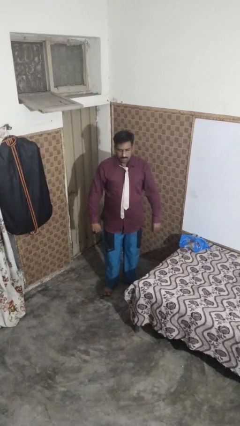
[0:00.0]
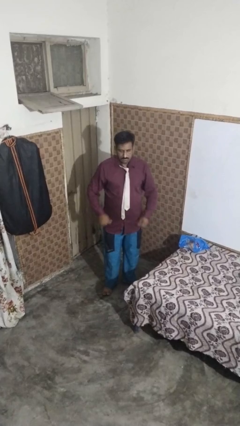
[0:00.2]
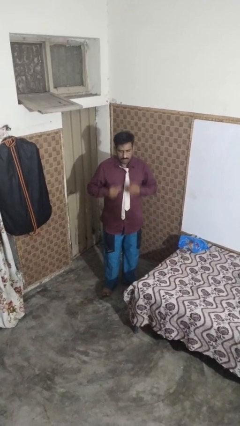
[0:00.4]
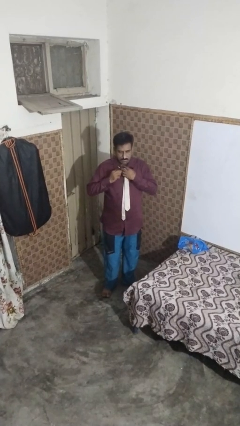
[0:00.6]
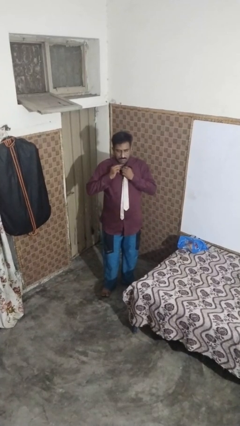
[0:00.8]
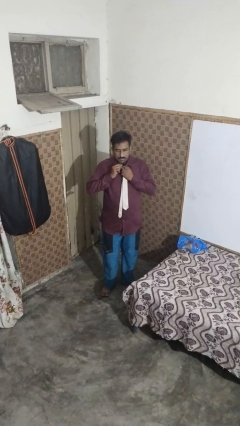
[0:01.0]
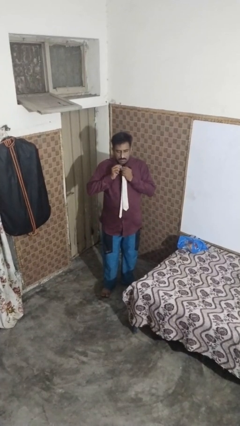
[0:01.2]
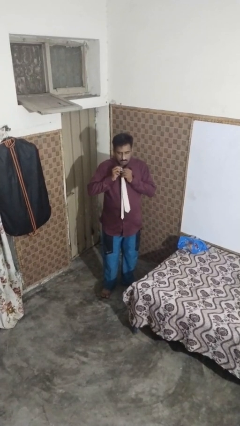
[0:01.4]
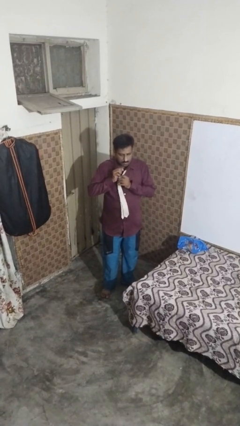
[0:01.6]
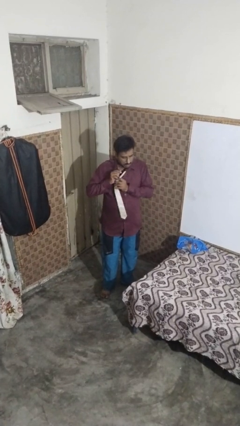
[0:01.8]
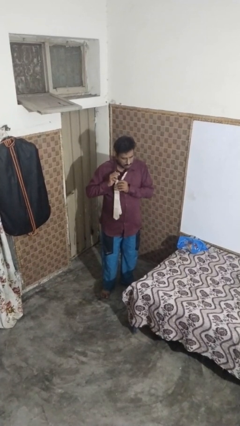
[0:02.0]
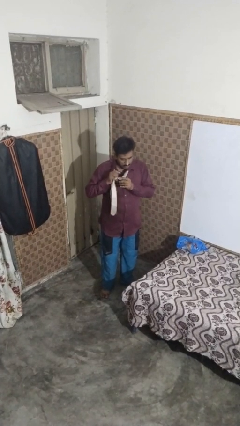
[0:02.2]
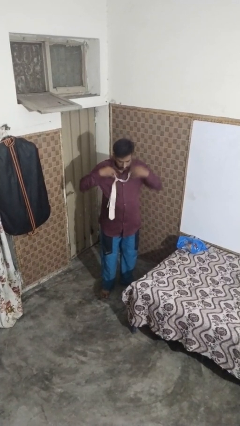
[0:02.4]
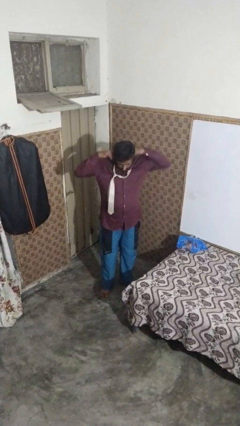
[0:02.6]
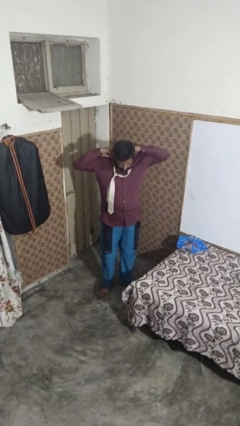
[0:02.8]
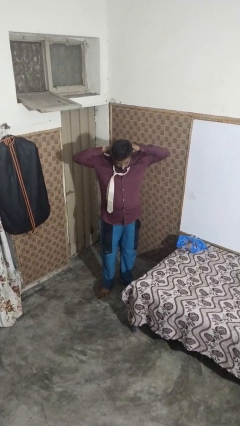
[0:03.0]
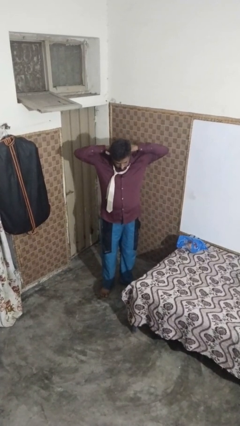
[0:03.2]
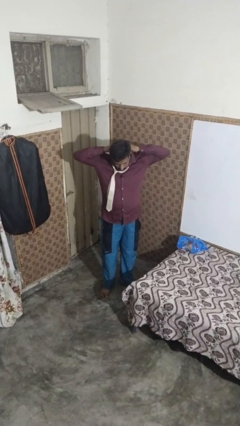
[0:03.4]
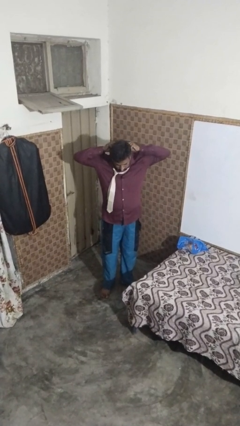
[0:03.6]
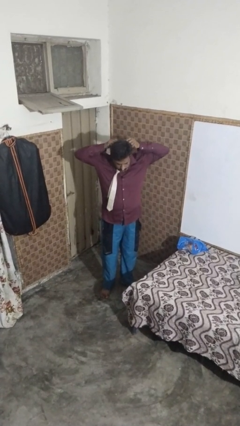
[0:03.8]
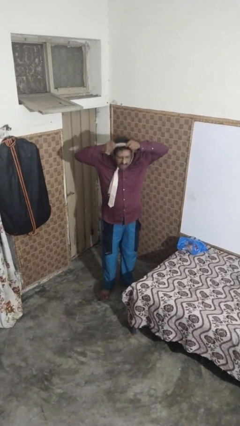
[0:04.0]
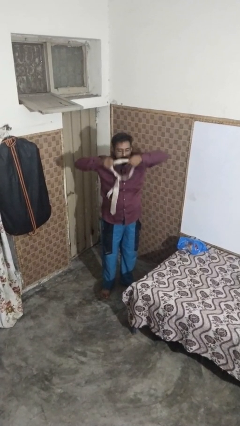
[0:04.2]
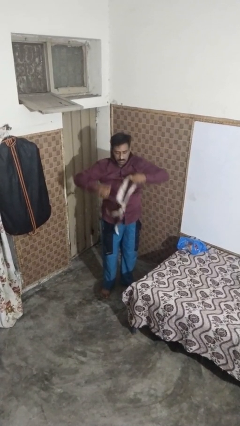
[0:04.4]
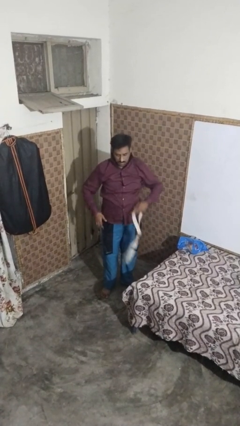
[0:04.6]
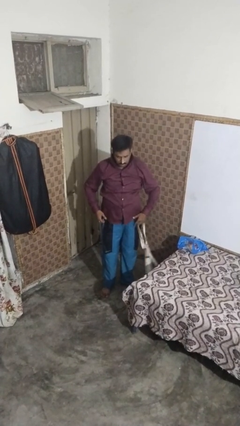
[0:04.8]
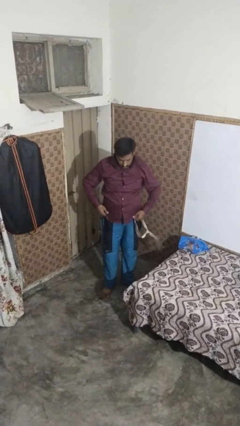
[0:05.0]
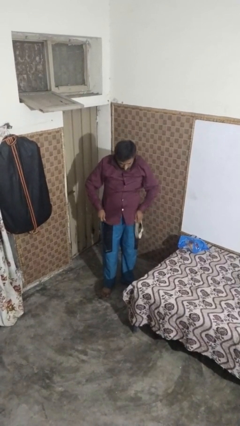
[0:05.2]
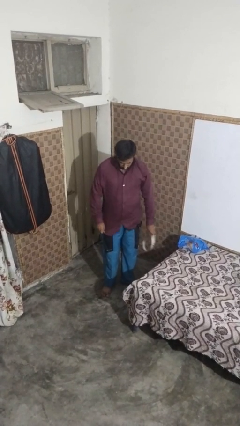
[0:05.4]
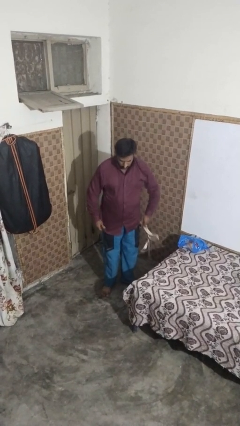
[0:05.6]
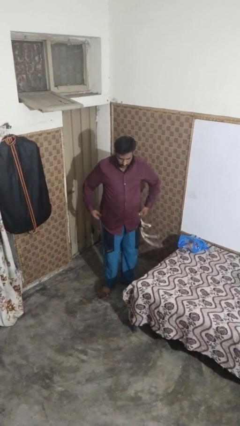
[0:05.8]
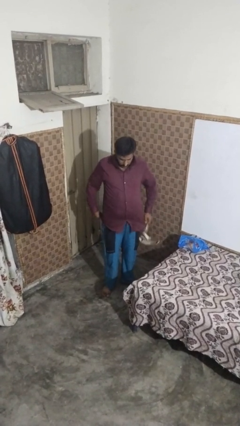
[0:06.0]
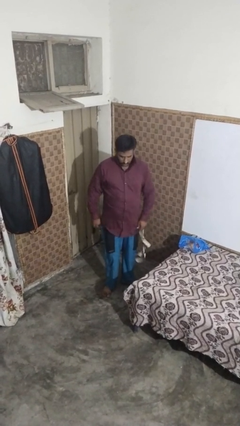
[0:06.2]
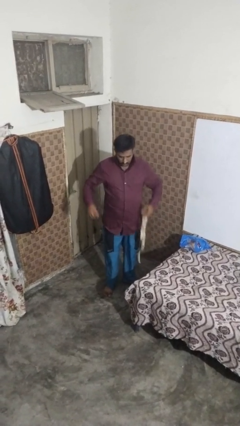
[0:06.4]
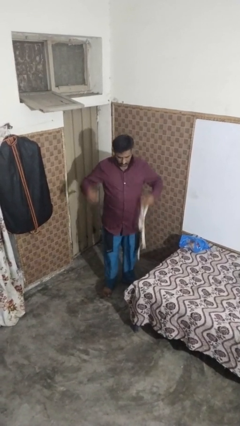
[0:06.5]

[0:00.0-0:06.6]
person takes off necktie

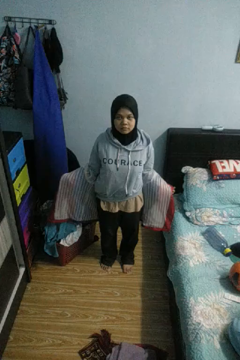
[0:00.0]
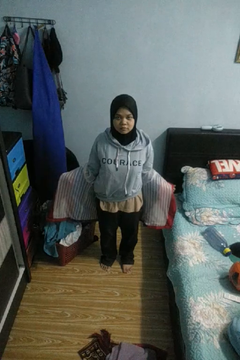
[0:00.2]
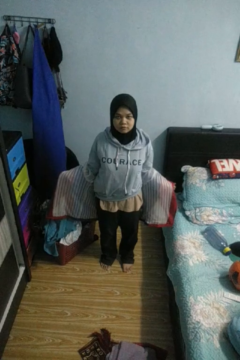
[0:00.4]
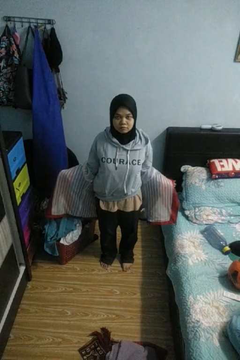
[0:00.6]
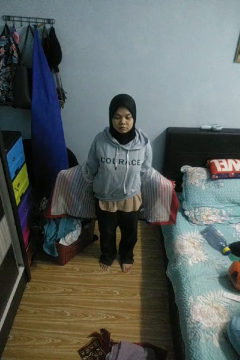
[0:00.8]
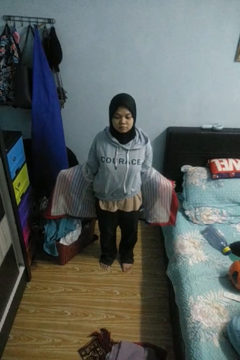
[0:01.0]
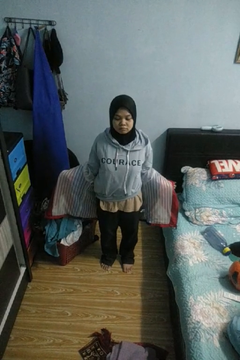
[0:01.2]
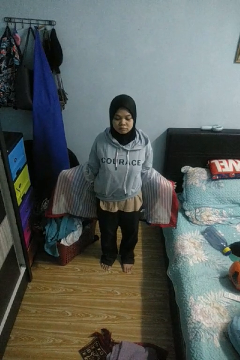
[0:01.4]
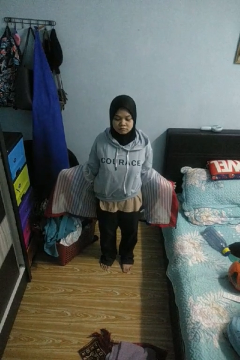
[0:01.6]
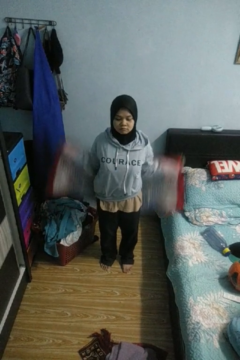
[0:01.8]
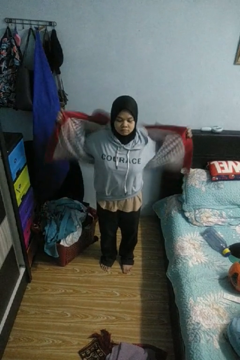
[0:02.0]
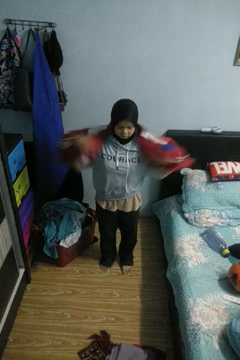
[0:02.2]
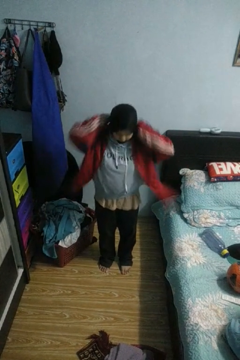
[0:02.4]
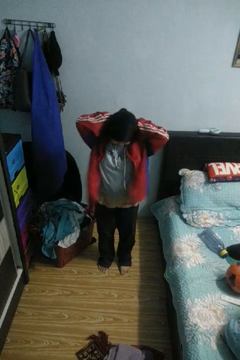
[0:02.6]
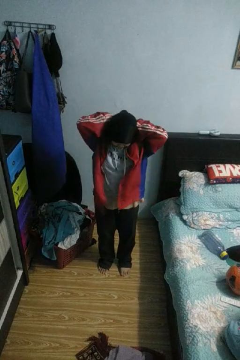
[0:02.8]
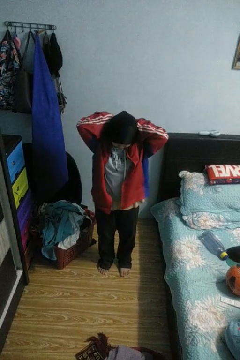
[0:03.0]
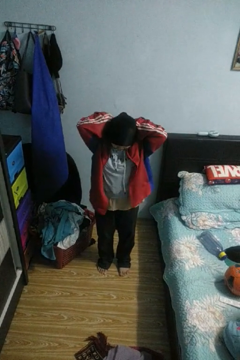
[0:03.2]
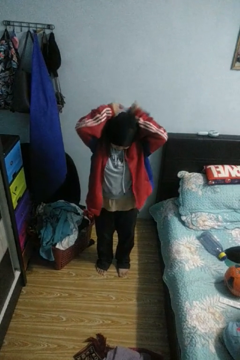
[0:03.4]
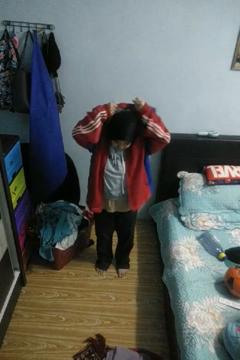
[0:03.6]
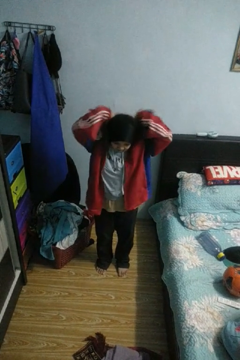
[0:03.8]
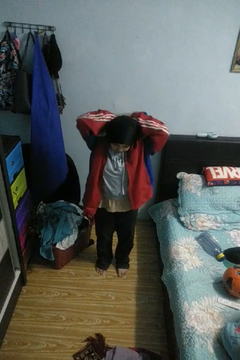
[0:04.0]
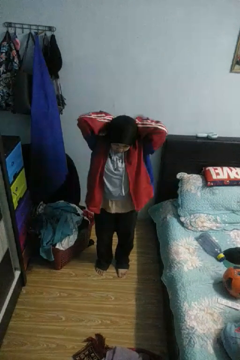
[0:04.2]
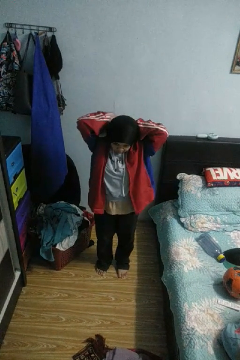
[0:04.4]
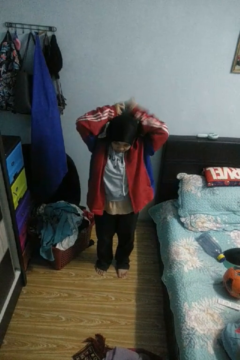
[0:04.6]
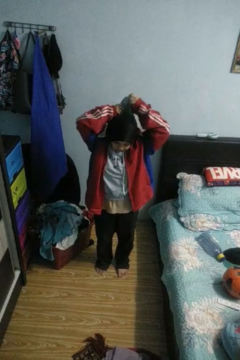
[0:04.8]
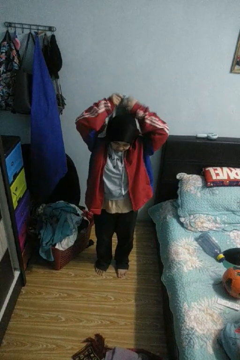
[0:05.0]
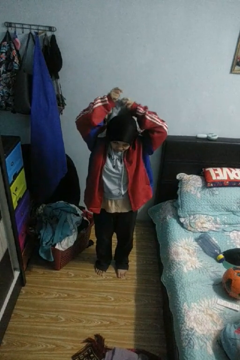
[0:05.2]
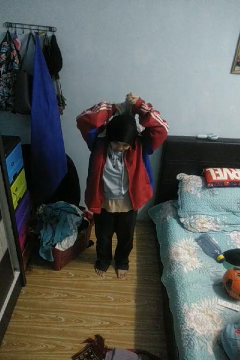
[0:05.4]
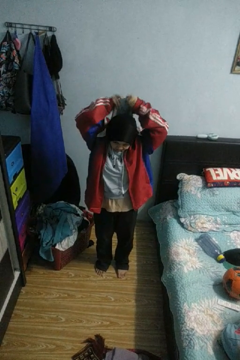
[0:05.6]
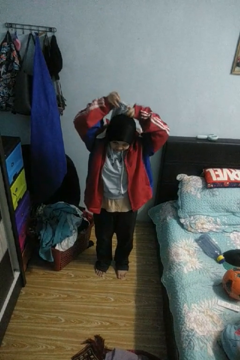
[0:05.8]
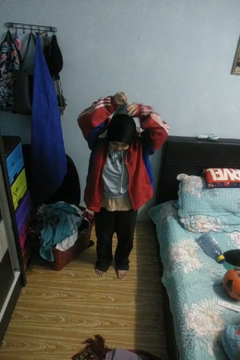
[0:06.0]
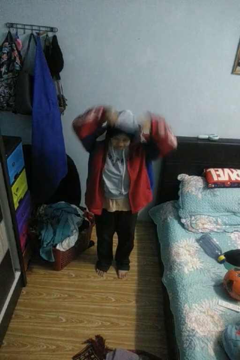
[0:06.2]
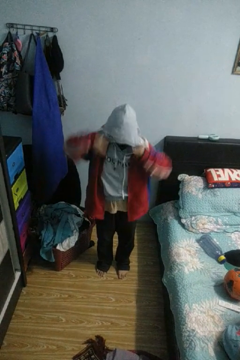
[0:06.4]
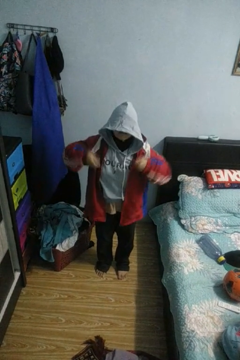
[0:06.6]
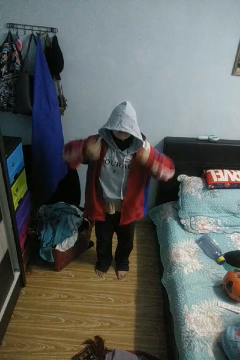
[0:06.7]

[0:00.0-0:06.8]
person puts on hoodie

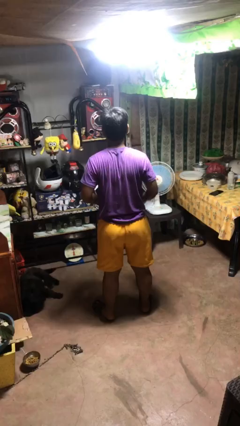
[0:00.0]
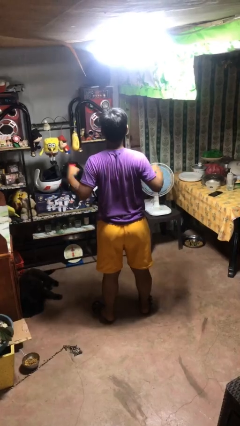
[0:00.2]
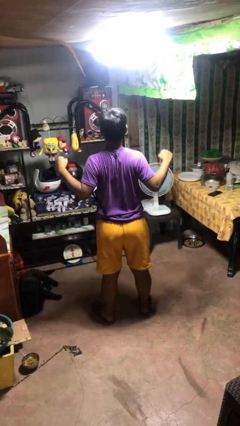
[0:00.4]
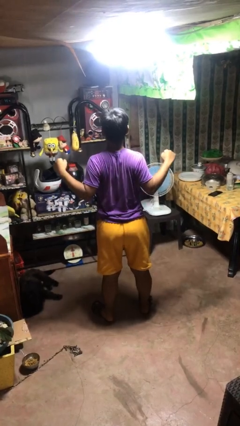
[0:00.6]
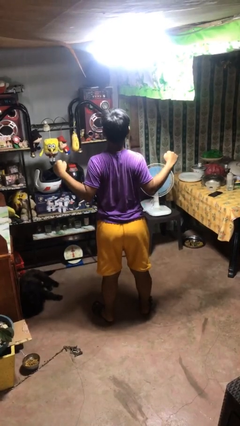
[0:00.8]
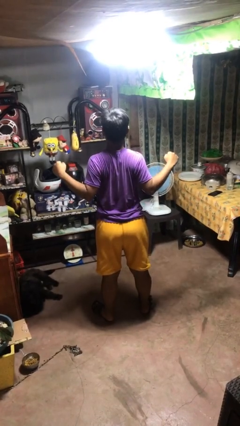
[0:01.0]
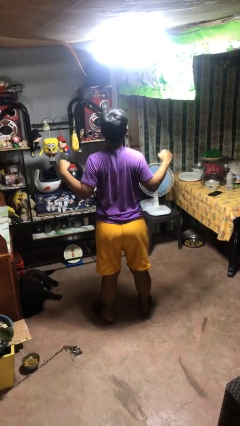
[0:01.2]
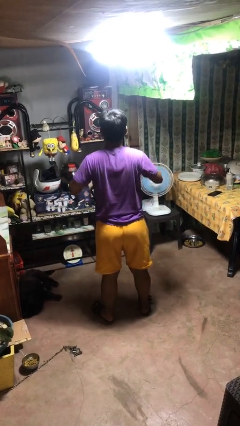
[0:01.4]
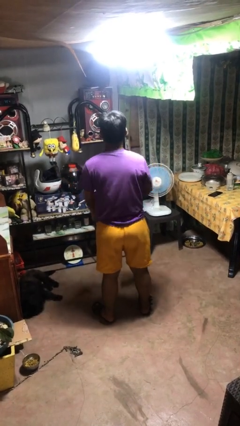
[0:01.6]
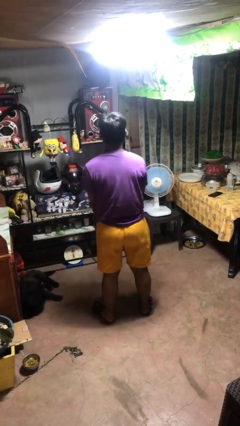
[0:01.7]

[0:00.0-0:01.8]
person stretches back

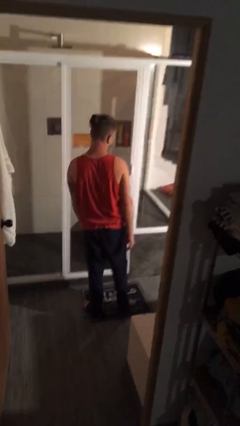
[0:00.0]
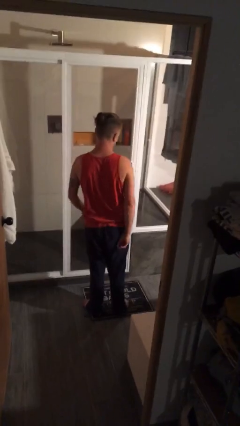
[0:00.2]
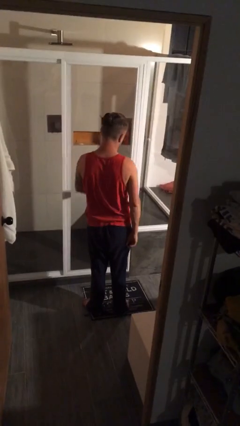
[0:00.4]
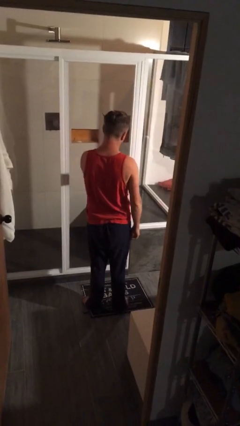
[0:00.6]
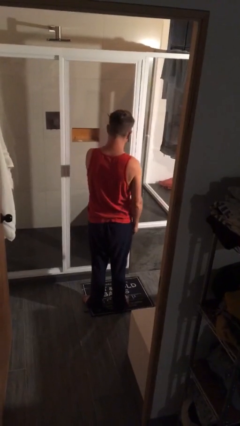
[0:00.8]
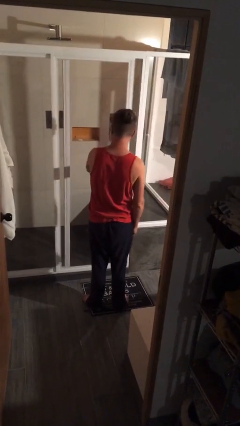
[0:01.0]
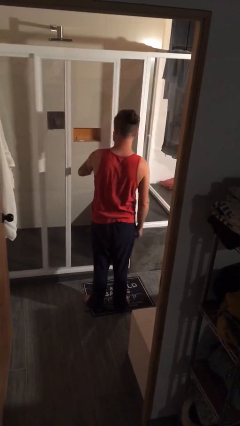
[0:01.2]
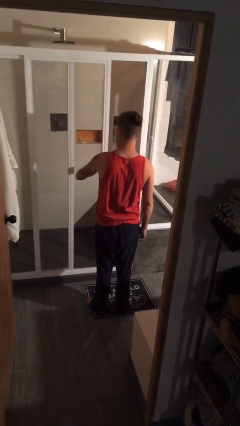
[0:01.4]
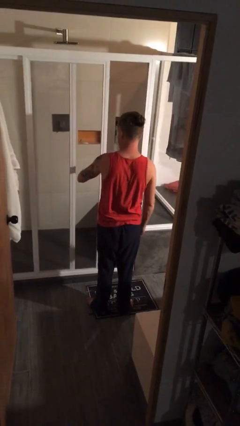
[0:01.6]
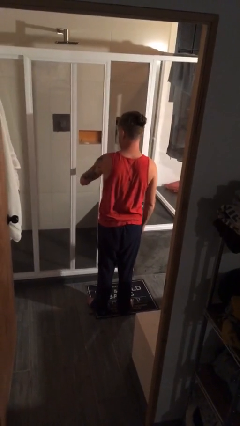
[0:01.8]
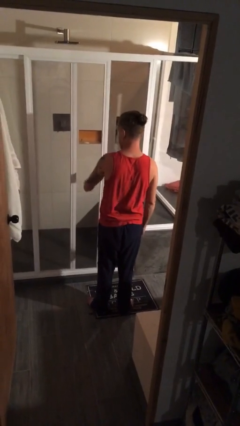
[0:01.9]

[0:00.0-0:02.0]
person opens sliding door

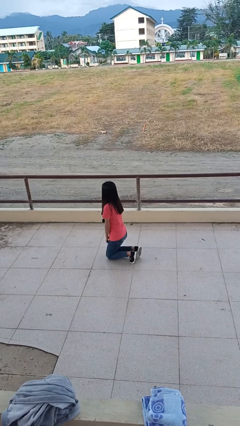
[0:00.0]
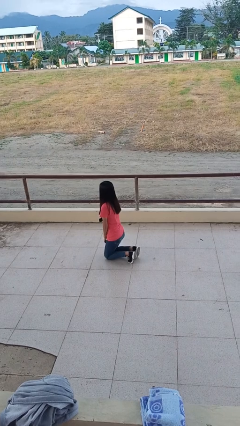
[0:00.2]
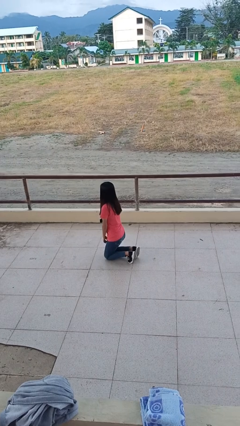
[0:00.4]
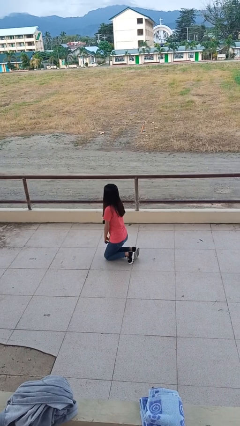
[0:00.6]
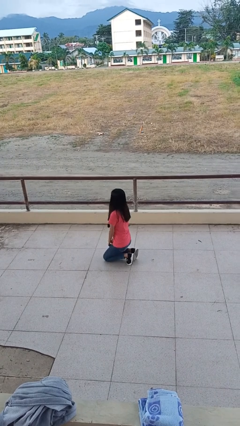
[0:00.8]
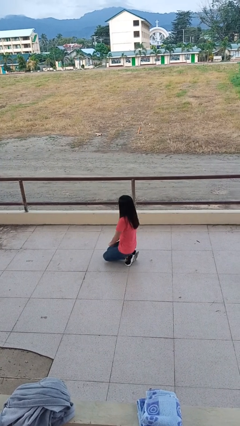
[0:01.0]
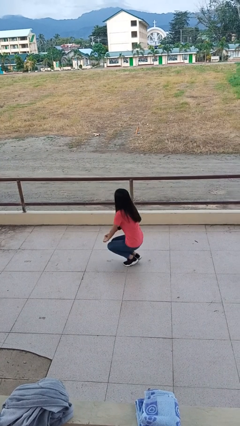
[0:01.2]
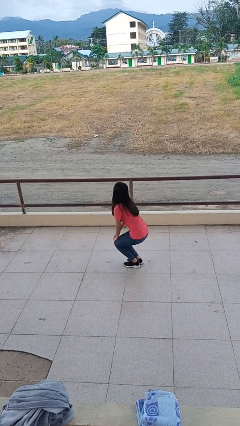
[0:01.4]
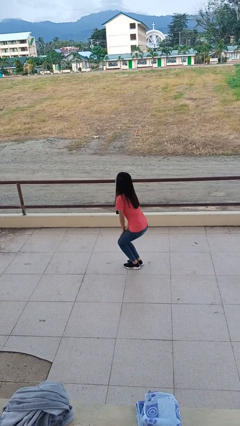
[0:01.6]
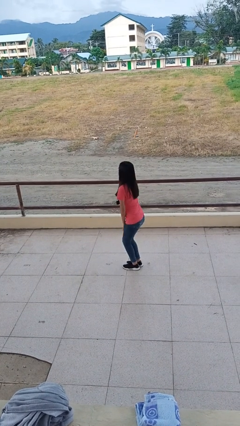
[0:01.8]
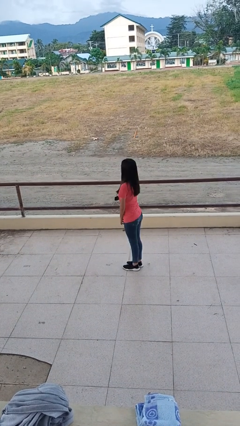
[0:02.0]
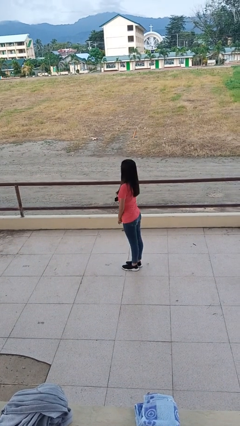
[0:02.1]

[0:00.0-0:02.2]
person stands up from floor
